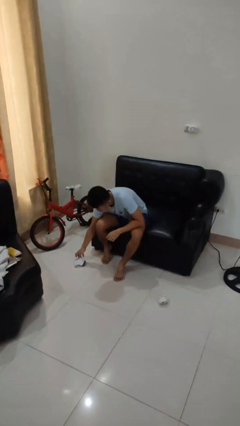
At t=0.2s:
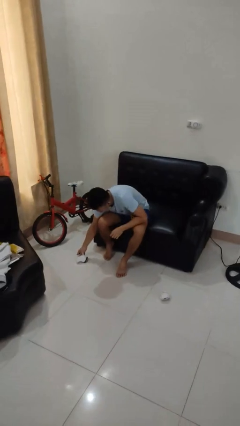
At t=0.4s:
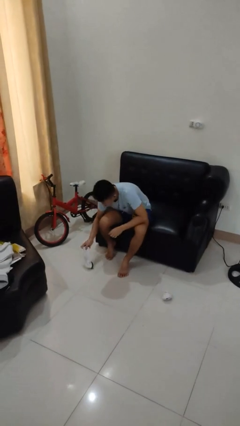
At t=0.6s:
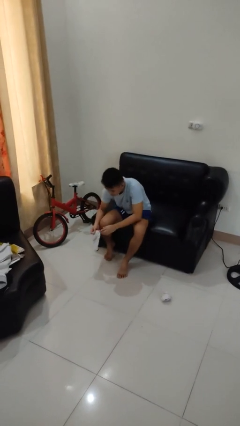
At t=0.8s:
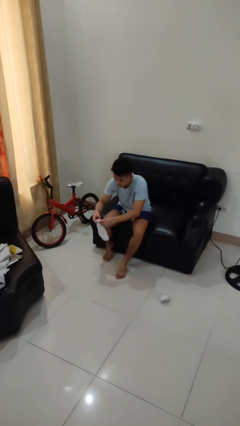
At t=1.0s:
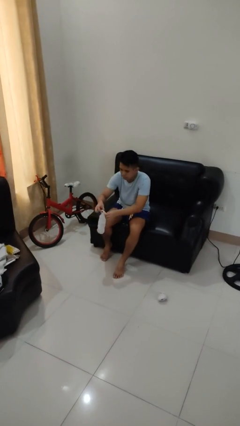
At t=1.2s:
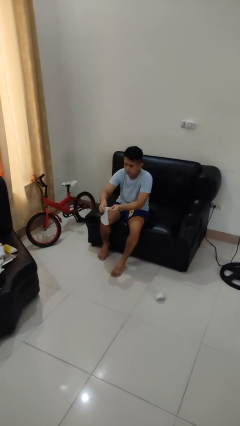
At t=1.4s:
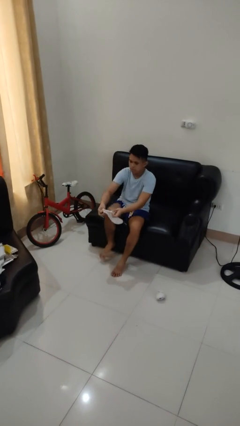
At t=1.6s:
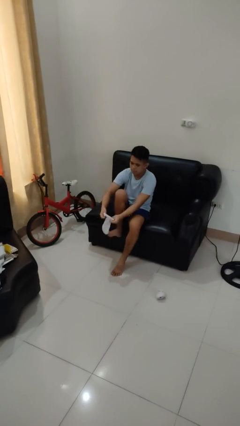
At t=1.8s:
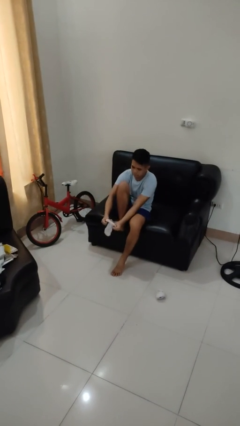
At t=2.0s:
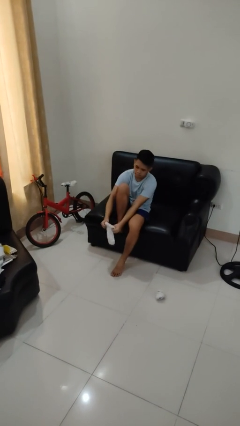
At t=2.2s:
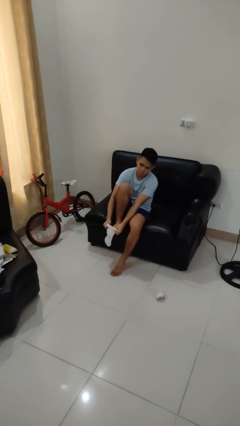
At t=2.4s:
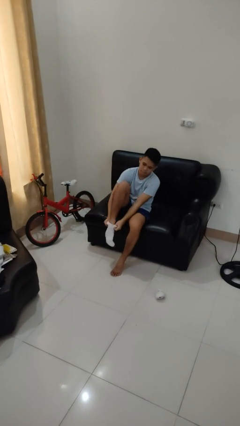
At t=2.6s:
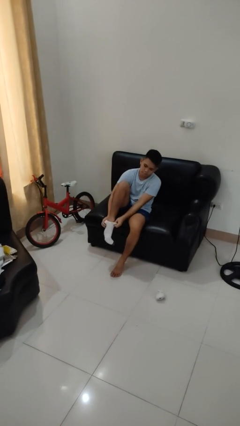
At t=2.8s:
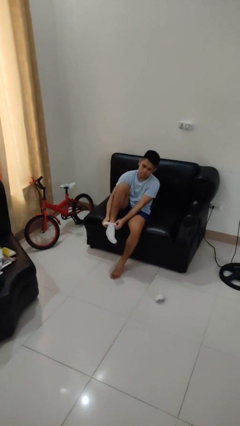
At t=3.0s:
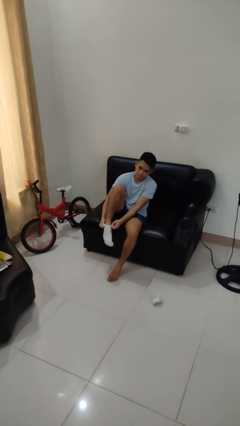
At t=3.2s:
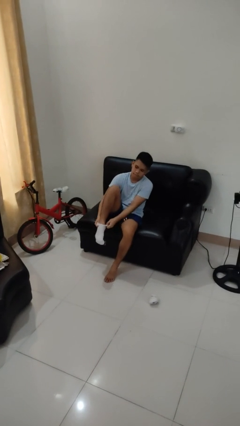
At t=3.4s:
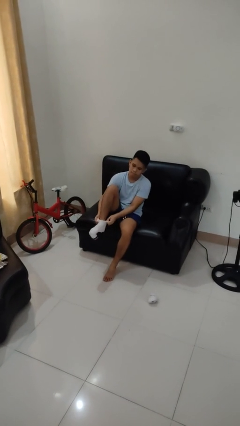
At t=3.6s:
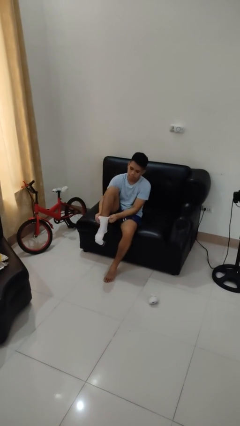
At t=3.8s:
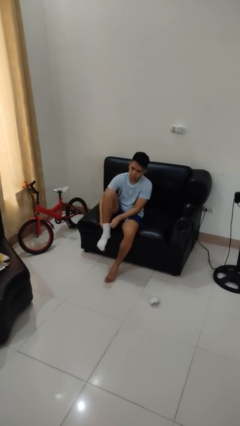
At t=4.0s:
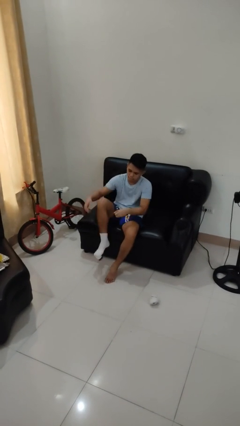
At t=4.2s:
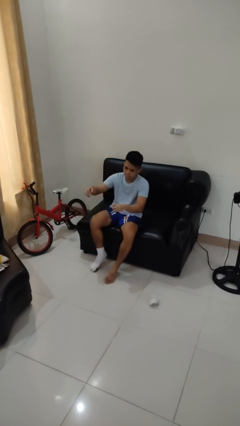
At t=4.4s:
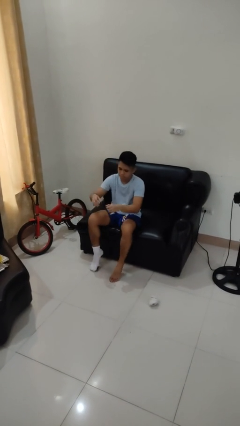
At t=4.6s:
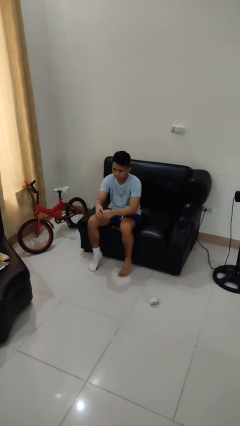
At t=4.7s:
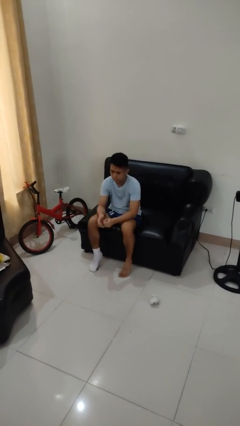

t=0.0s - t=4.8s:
person puts on socks

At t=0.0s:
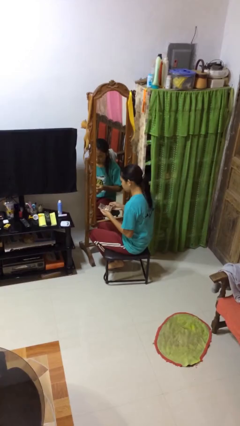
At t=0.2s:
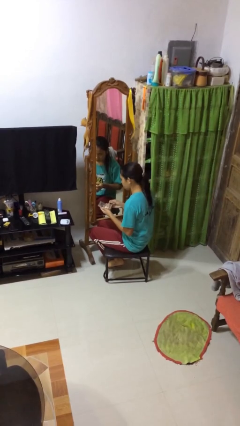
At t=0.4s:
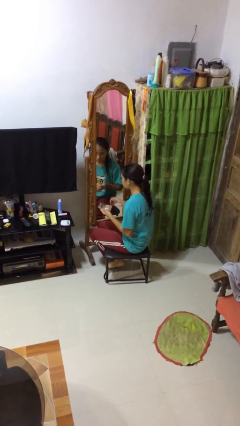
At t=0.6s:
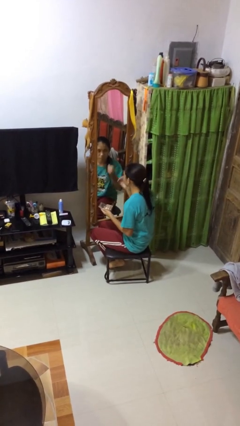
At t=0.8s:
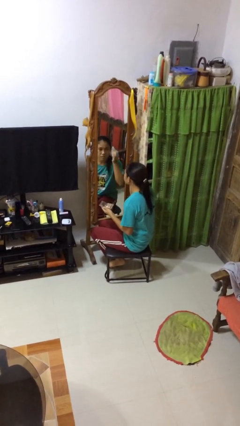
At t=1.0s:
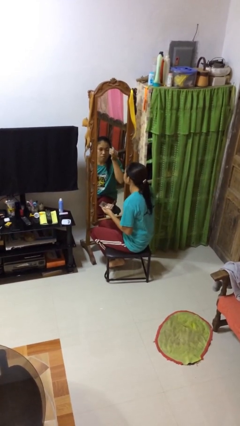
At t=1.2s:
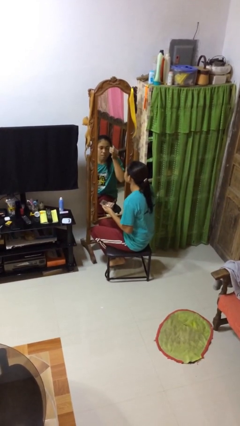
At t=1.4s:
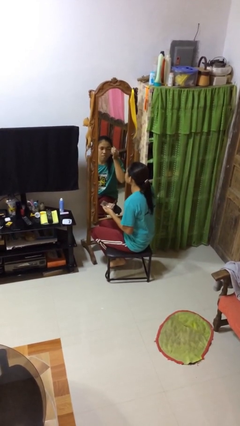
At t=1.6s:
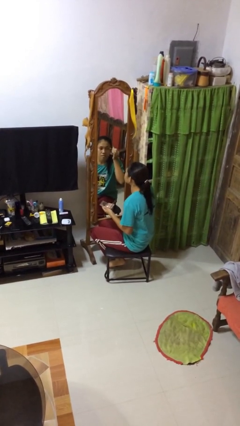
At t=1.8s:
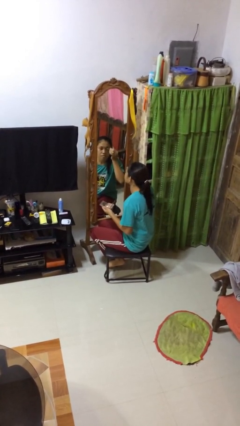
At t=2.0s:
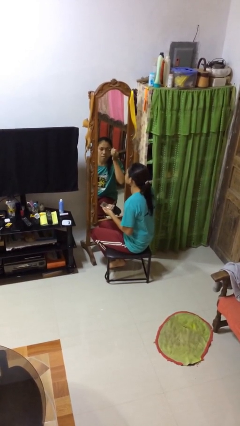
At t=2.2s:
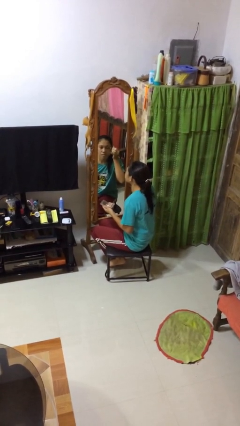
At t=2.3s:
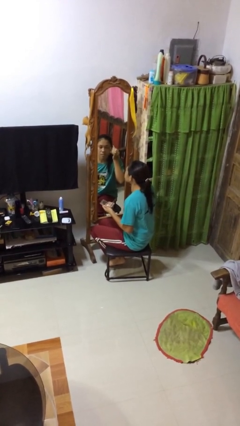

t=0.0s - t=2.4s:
person applies eye makeup

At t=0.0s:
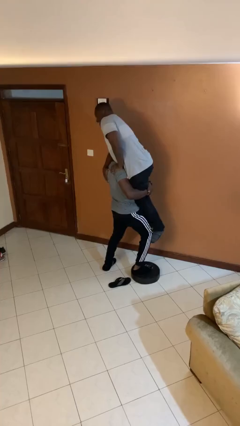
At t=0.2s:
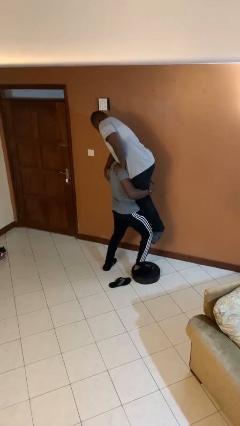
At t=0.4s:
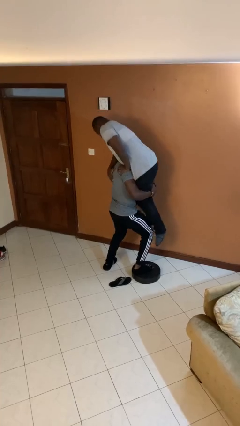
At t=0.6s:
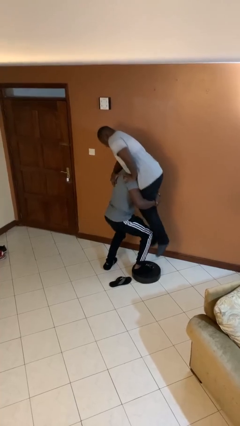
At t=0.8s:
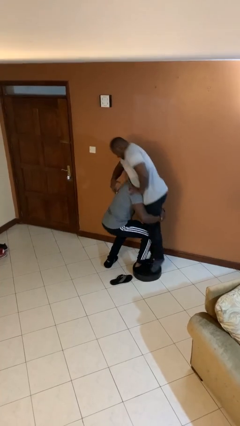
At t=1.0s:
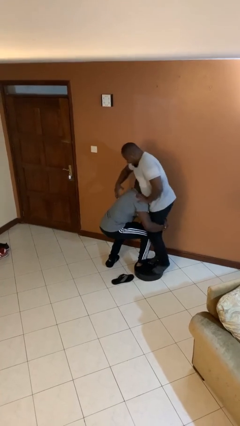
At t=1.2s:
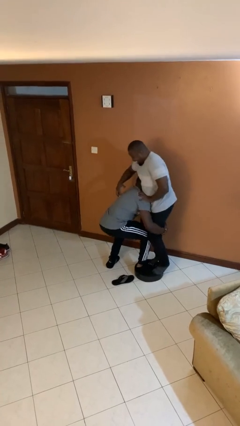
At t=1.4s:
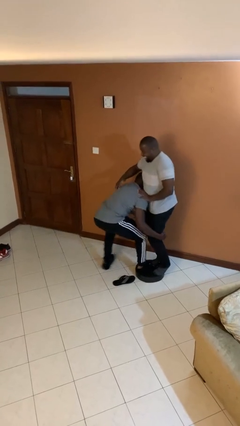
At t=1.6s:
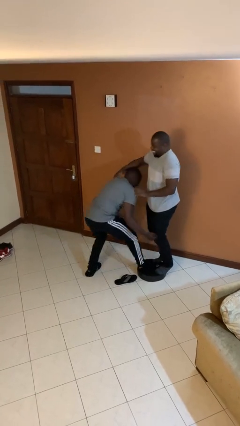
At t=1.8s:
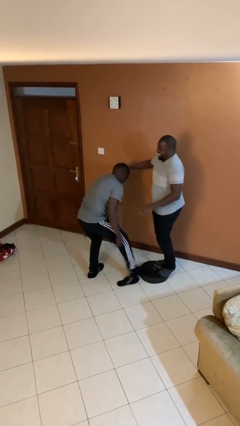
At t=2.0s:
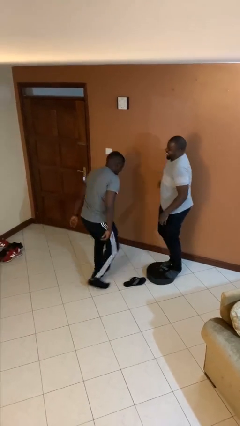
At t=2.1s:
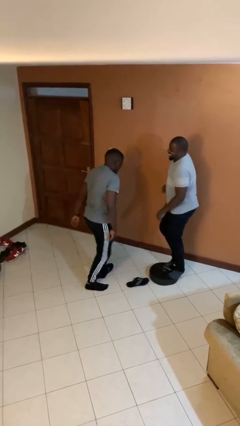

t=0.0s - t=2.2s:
person puts down person

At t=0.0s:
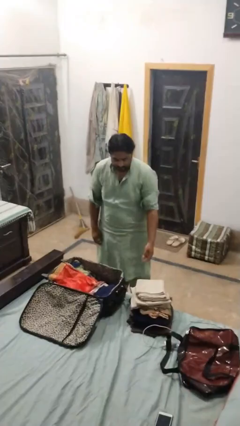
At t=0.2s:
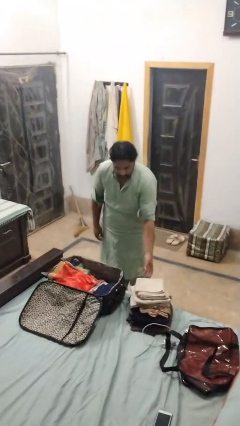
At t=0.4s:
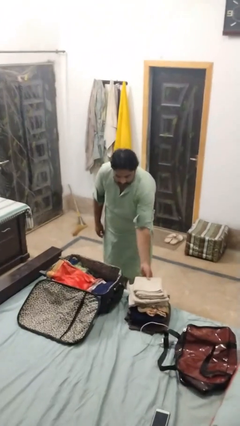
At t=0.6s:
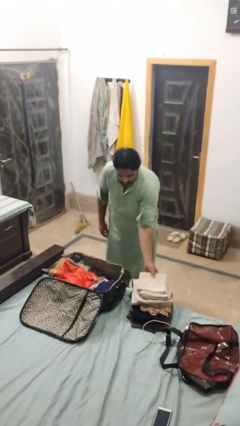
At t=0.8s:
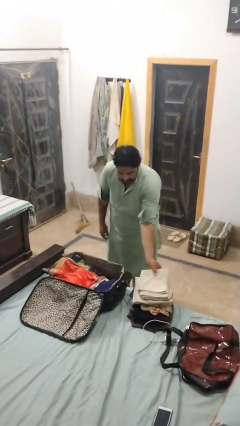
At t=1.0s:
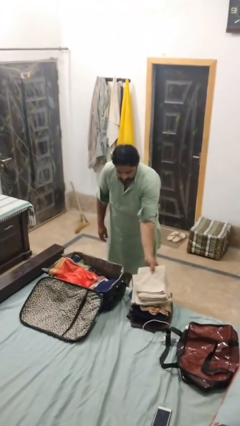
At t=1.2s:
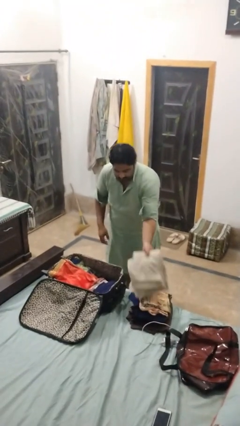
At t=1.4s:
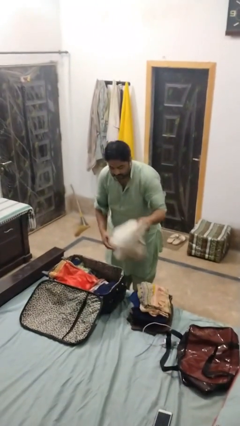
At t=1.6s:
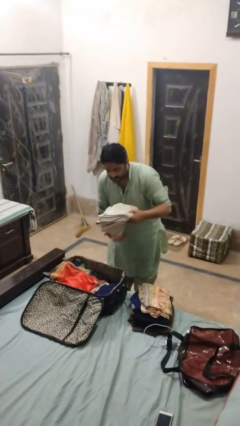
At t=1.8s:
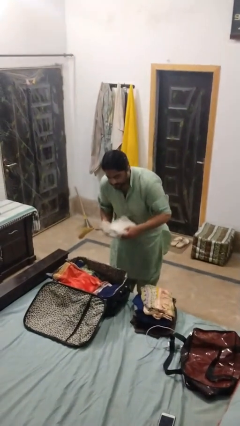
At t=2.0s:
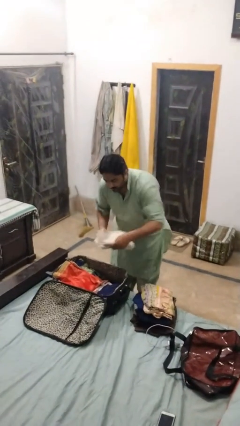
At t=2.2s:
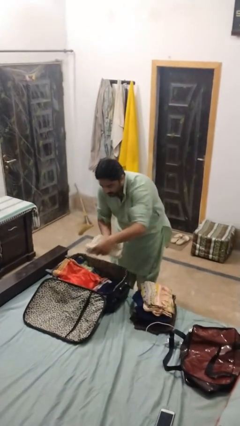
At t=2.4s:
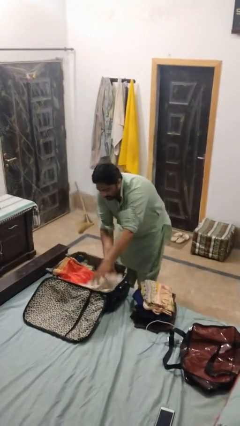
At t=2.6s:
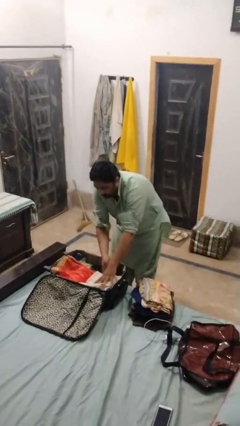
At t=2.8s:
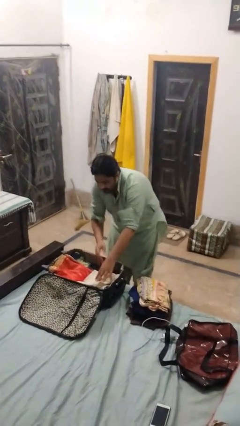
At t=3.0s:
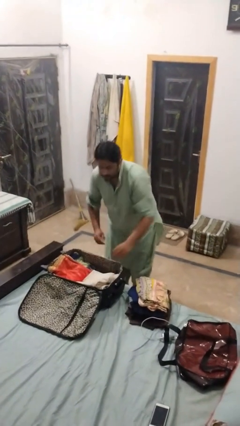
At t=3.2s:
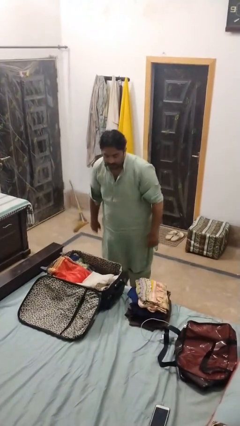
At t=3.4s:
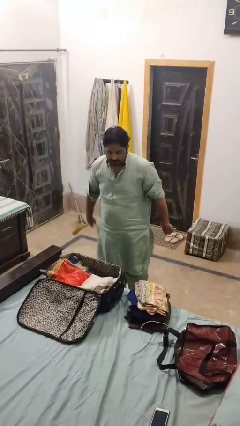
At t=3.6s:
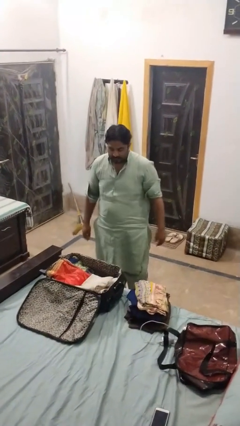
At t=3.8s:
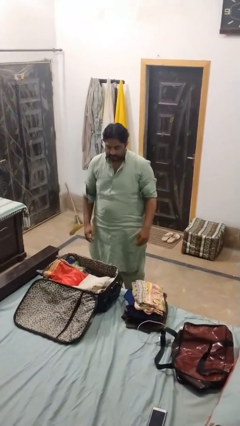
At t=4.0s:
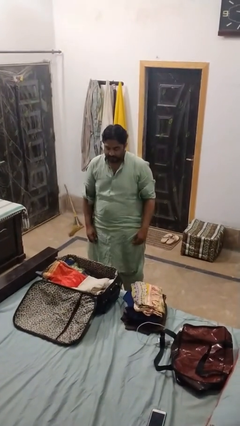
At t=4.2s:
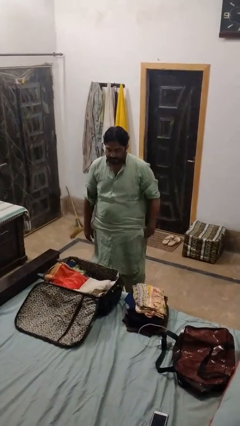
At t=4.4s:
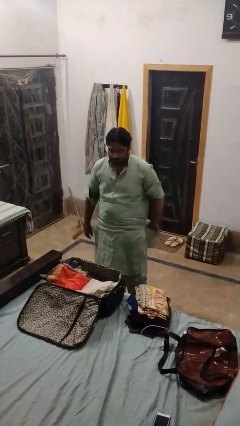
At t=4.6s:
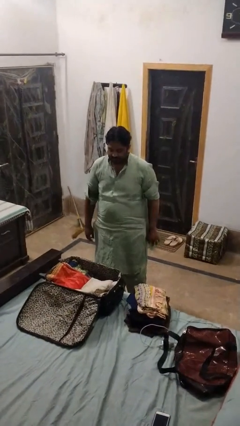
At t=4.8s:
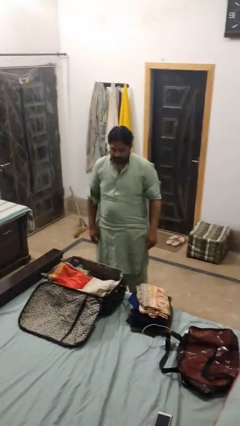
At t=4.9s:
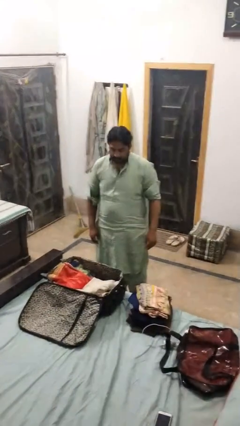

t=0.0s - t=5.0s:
person loads clothes into suitcase

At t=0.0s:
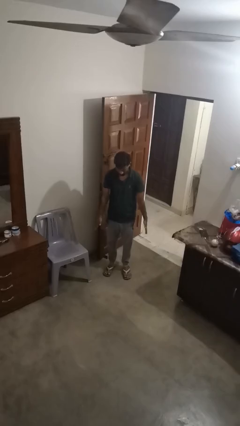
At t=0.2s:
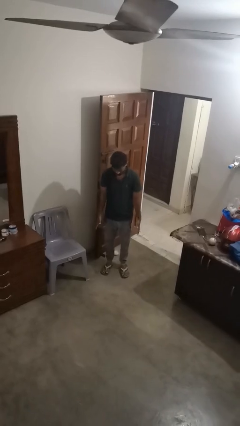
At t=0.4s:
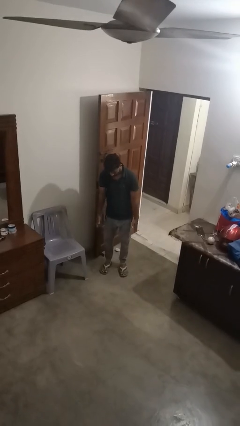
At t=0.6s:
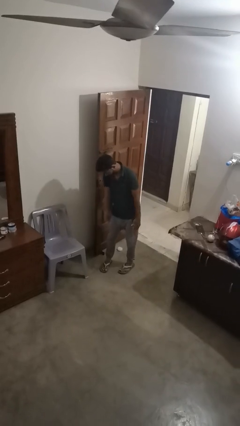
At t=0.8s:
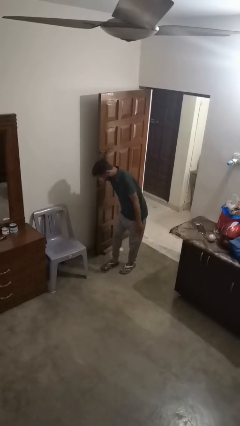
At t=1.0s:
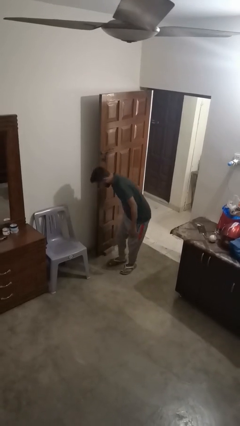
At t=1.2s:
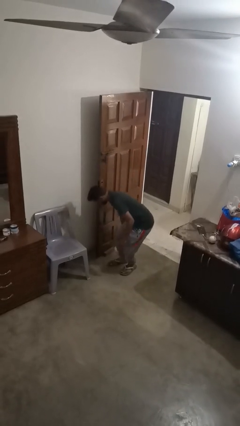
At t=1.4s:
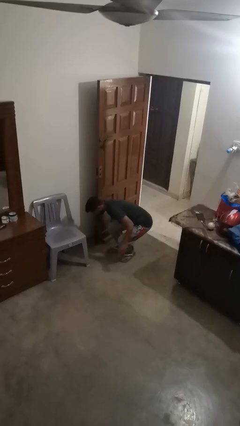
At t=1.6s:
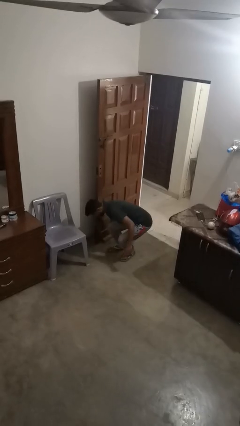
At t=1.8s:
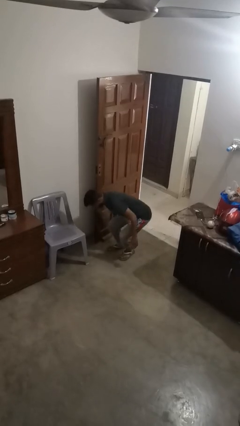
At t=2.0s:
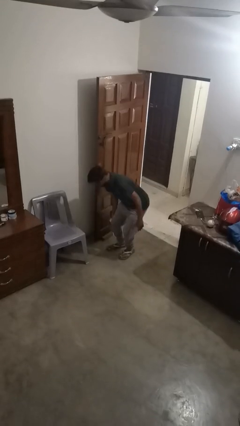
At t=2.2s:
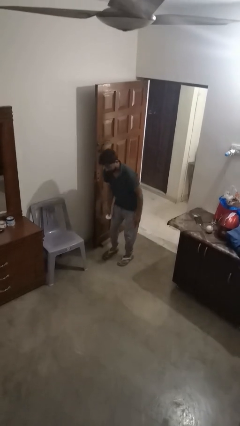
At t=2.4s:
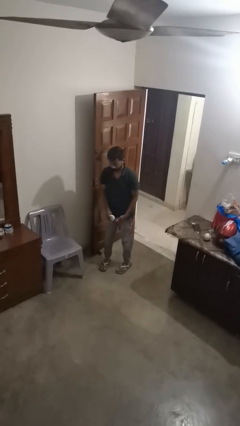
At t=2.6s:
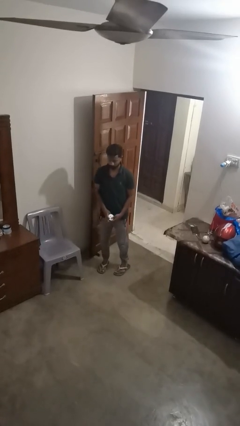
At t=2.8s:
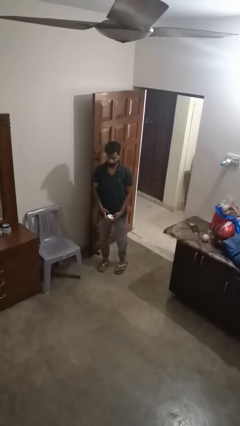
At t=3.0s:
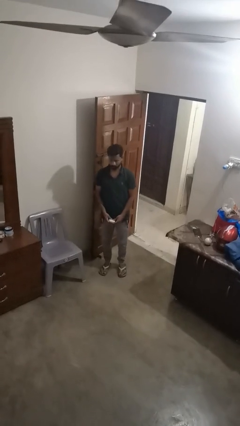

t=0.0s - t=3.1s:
person picks up object from floor
